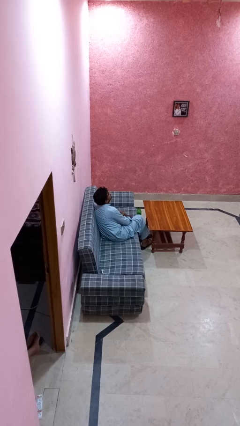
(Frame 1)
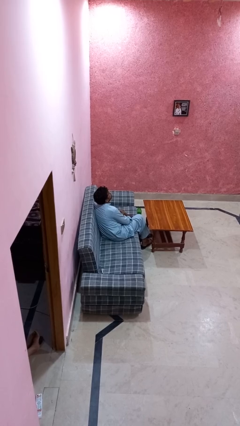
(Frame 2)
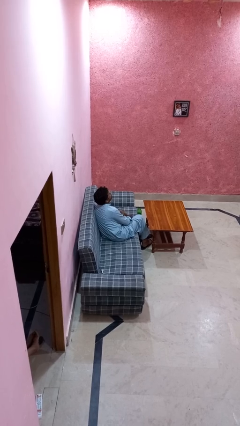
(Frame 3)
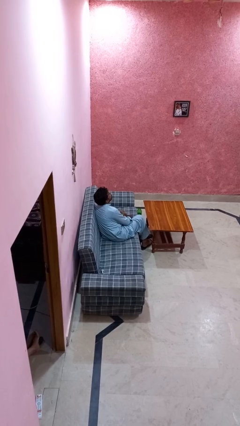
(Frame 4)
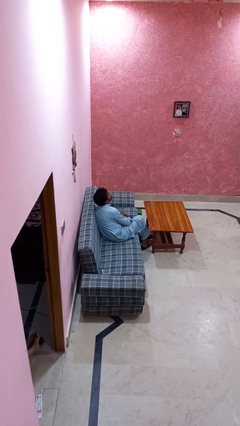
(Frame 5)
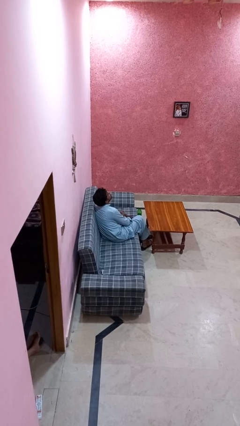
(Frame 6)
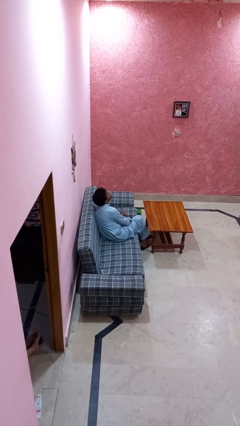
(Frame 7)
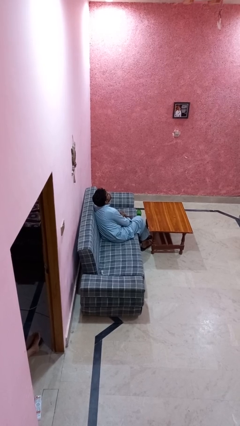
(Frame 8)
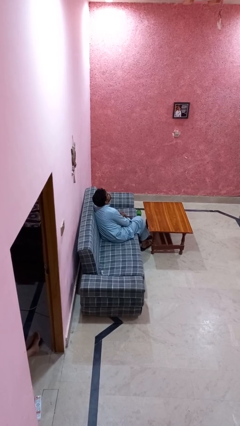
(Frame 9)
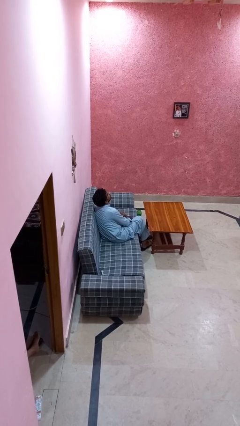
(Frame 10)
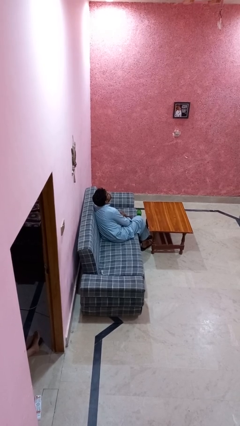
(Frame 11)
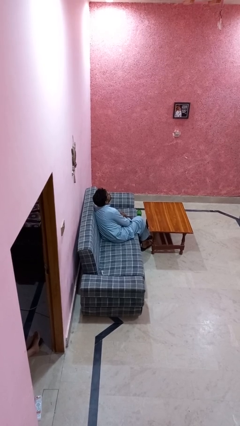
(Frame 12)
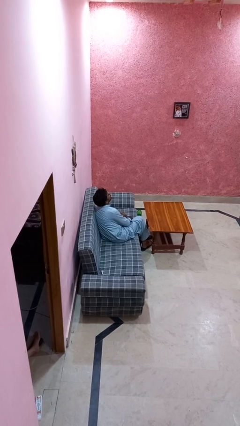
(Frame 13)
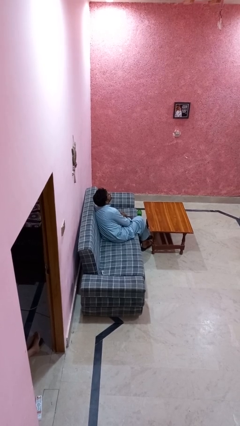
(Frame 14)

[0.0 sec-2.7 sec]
person sticks out tongue

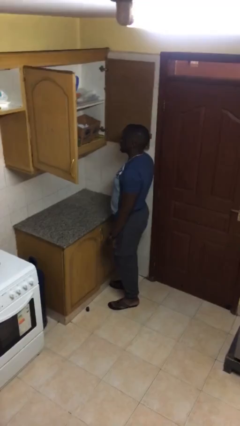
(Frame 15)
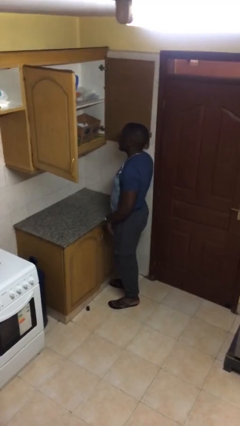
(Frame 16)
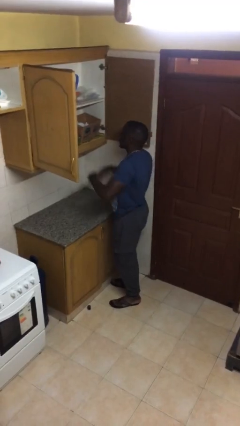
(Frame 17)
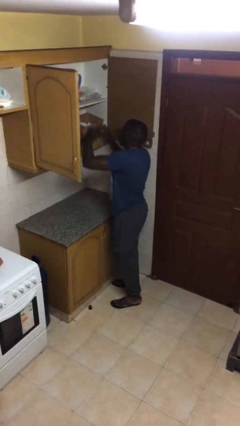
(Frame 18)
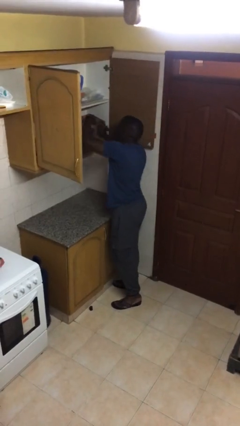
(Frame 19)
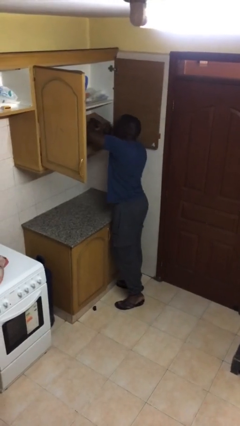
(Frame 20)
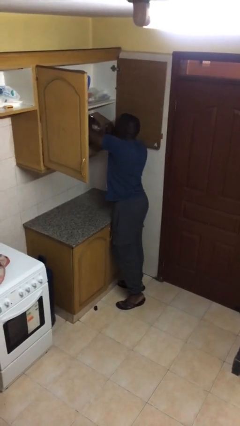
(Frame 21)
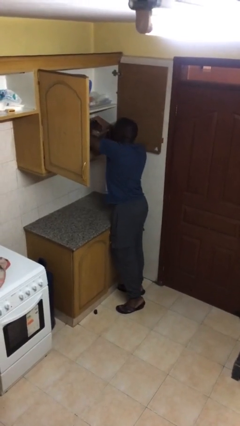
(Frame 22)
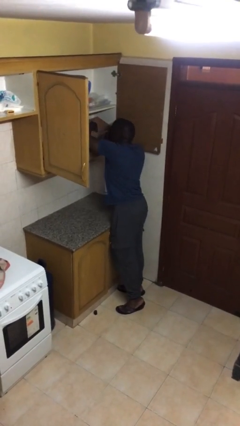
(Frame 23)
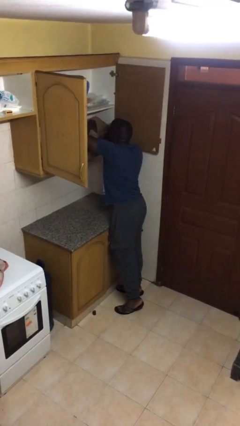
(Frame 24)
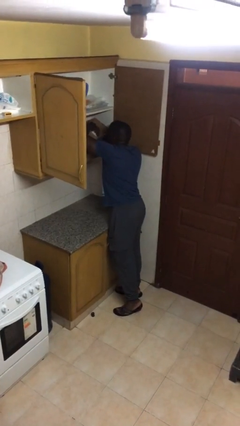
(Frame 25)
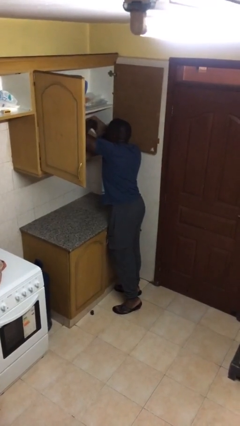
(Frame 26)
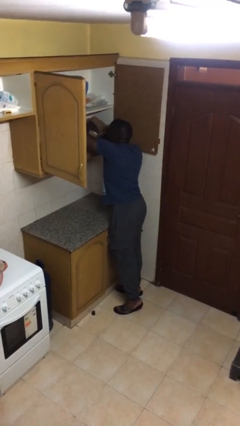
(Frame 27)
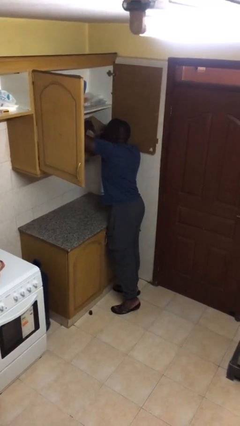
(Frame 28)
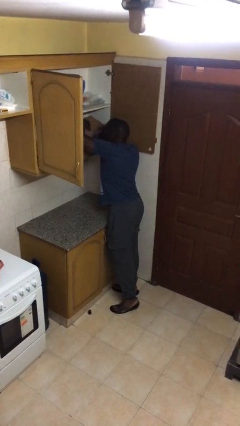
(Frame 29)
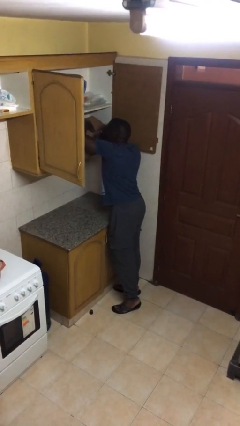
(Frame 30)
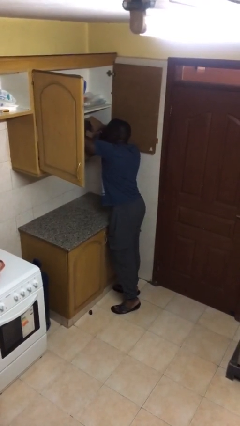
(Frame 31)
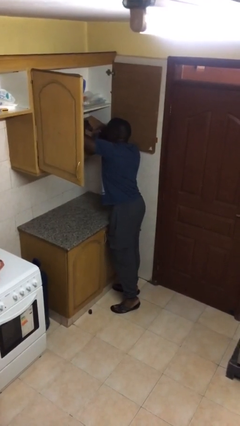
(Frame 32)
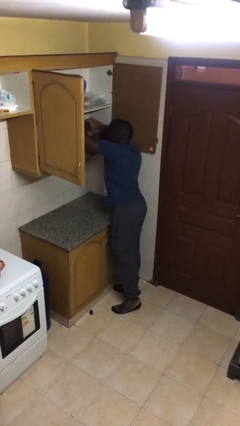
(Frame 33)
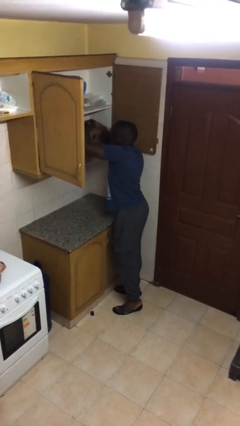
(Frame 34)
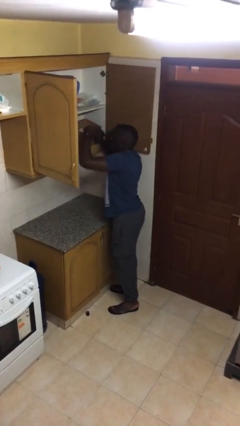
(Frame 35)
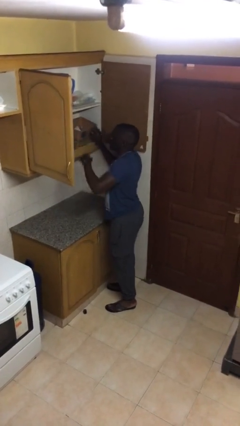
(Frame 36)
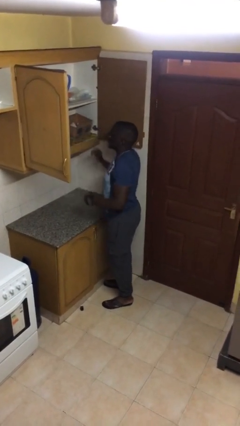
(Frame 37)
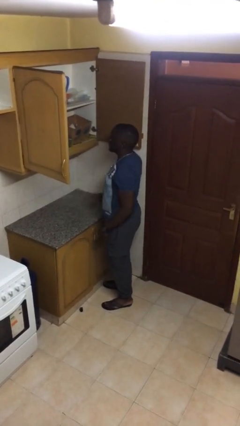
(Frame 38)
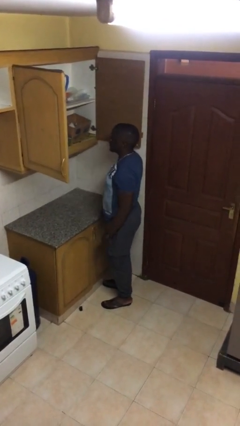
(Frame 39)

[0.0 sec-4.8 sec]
person searches in cabinet

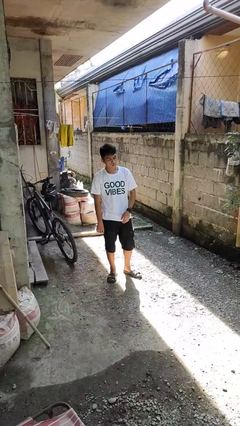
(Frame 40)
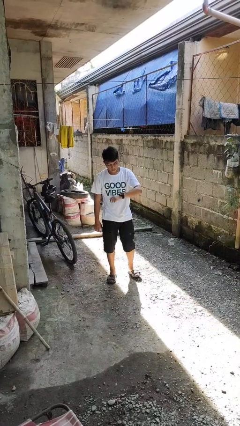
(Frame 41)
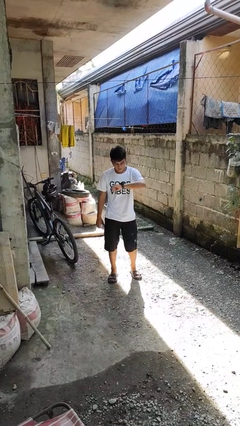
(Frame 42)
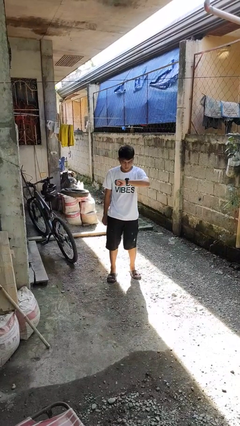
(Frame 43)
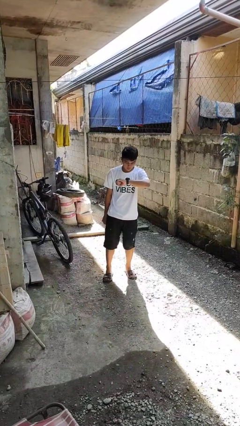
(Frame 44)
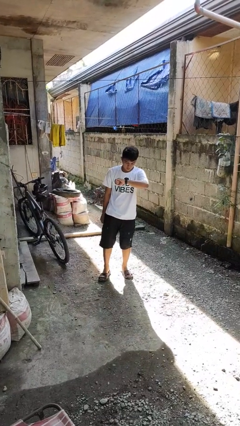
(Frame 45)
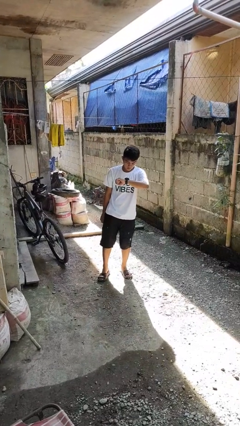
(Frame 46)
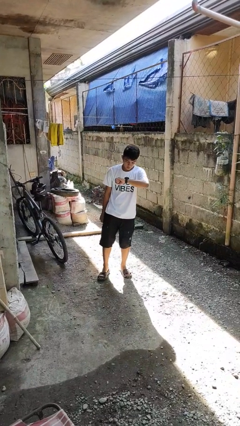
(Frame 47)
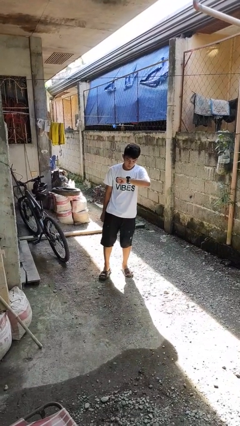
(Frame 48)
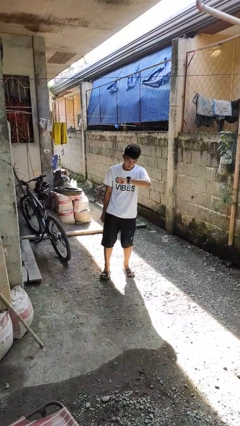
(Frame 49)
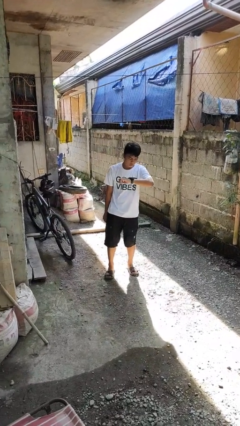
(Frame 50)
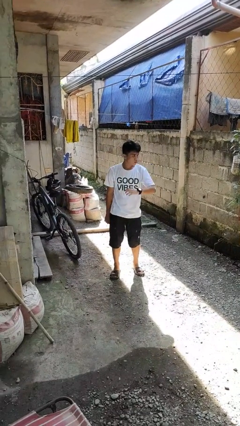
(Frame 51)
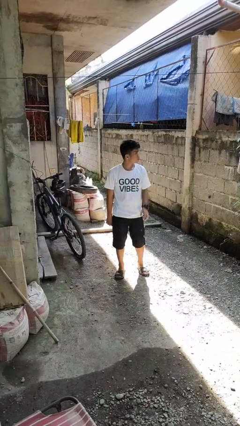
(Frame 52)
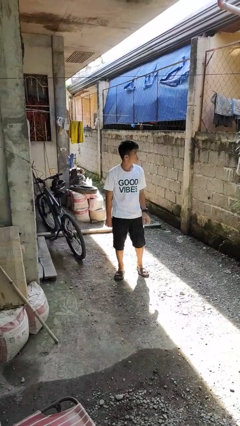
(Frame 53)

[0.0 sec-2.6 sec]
person looks at wristwatch

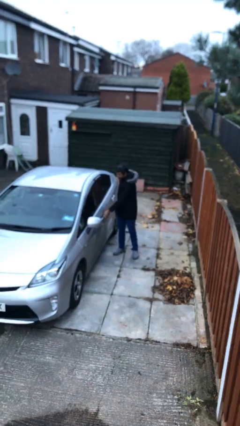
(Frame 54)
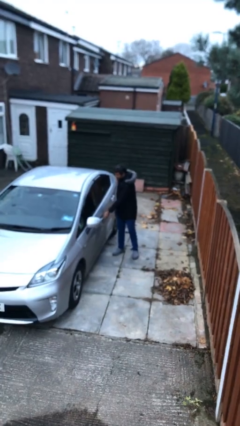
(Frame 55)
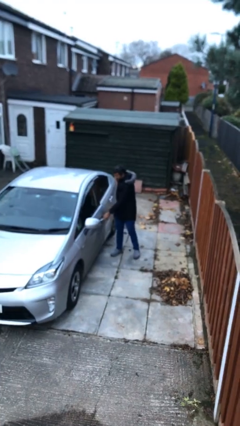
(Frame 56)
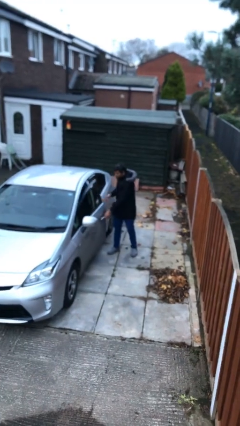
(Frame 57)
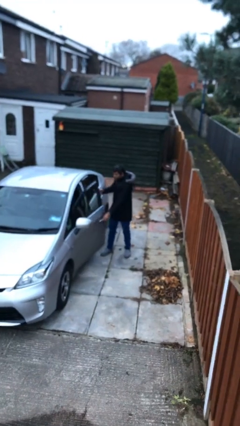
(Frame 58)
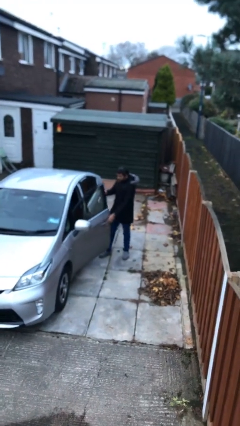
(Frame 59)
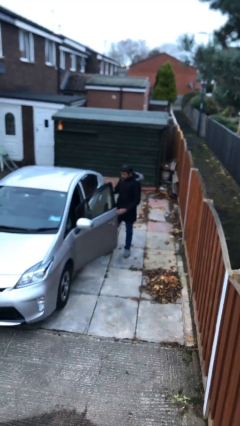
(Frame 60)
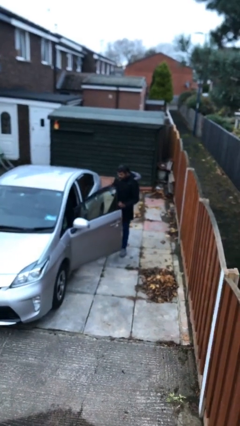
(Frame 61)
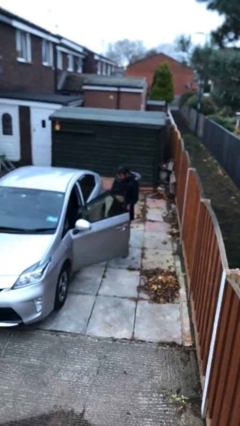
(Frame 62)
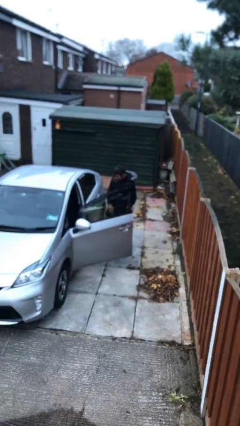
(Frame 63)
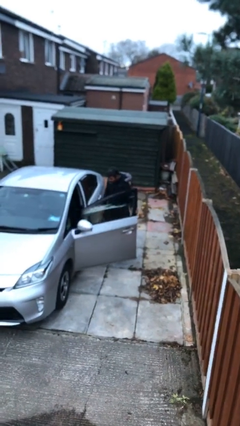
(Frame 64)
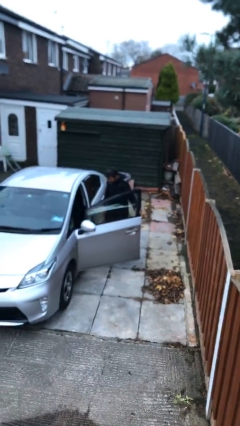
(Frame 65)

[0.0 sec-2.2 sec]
person opens car door

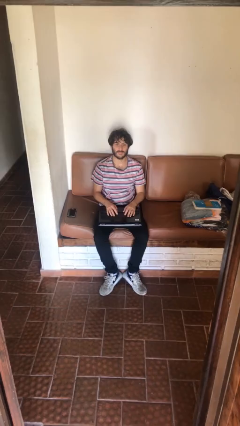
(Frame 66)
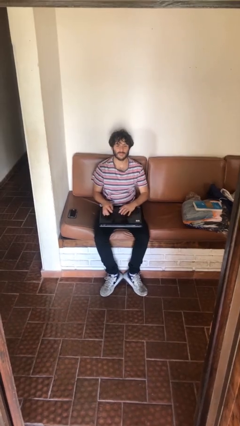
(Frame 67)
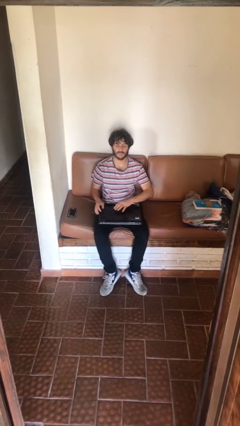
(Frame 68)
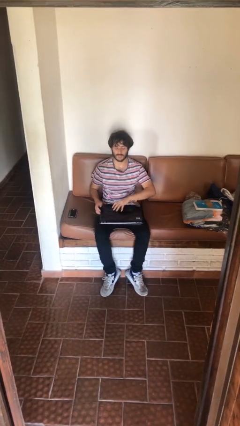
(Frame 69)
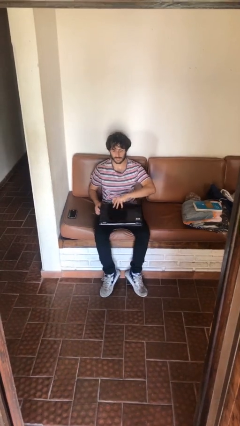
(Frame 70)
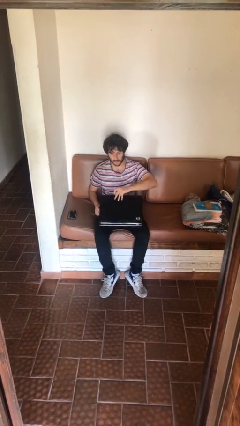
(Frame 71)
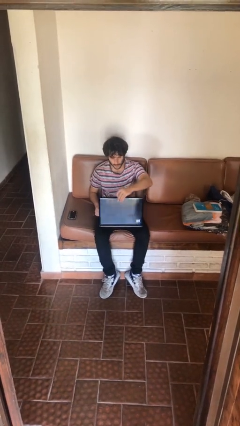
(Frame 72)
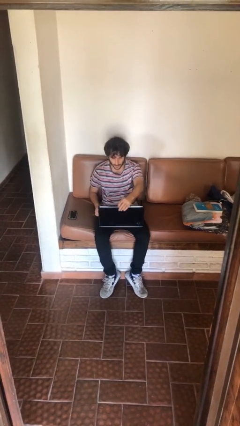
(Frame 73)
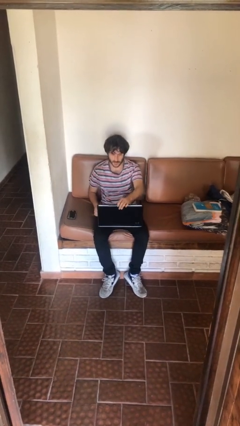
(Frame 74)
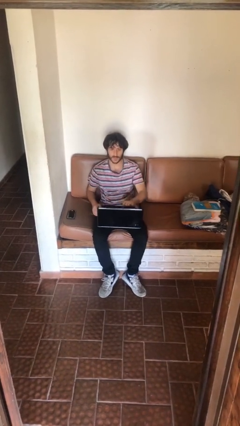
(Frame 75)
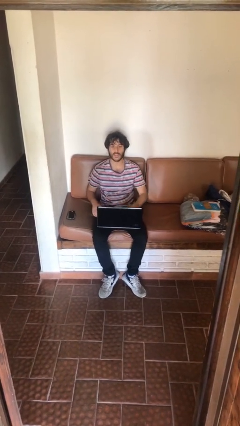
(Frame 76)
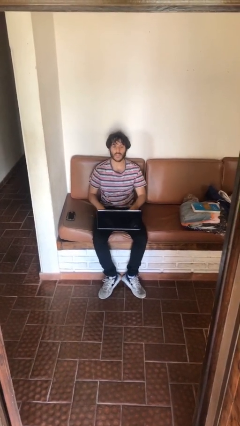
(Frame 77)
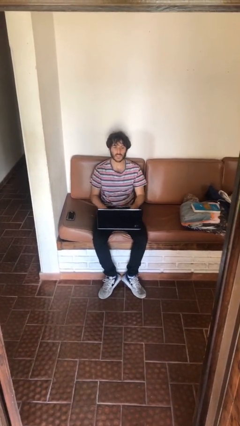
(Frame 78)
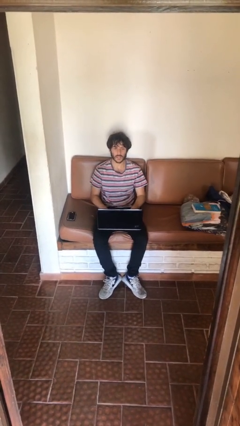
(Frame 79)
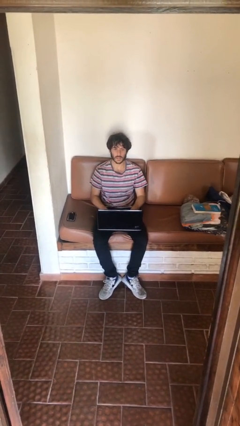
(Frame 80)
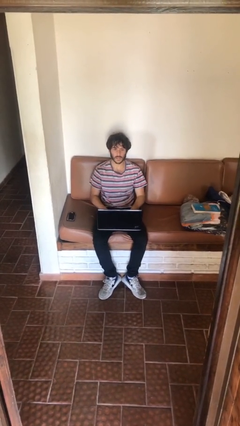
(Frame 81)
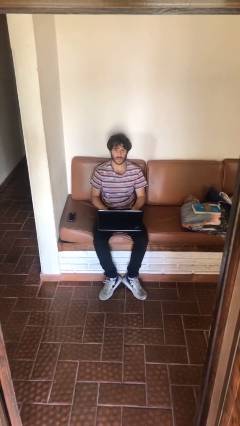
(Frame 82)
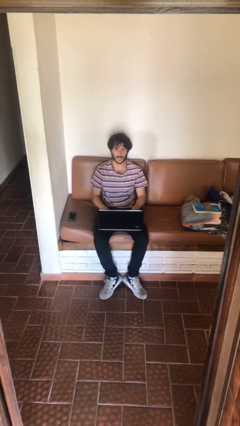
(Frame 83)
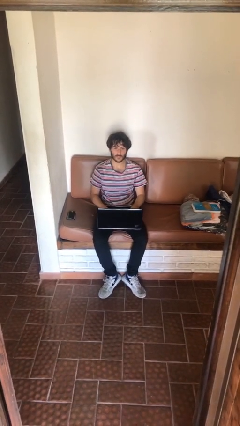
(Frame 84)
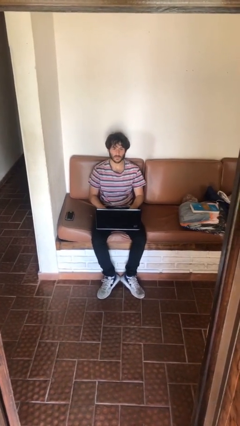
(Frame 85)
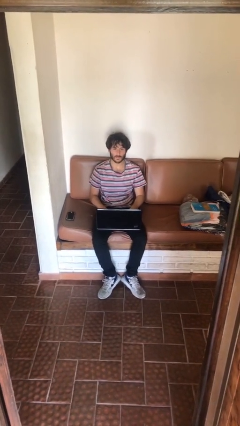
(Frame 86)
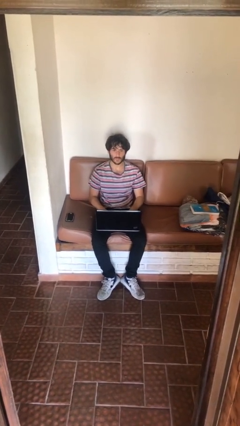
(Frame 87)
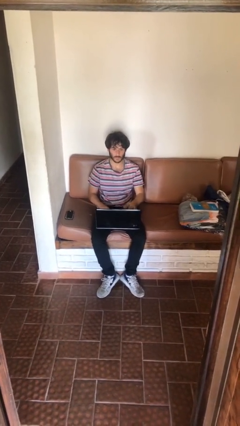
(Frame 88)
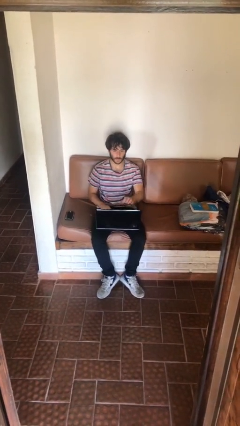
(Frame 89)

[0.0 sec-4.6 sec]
person interacts with laptop

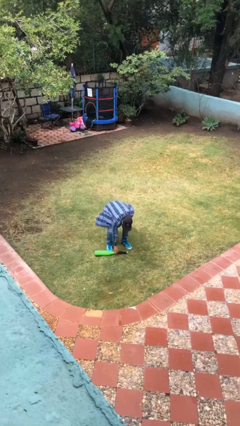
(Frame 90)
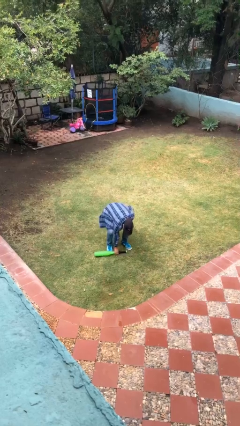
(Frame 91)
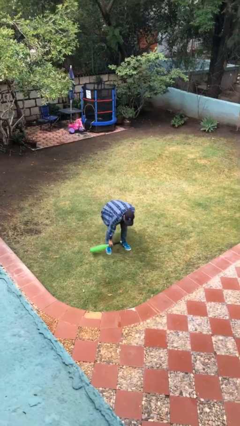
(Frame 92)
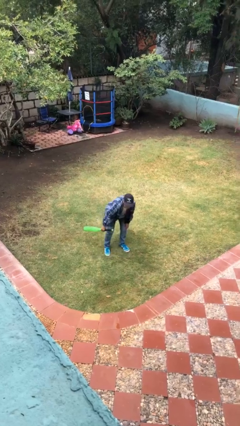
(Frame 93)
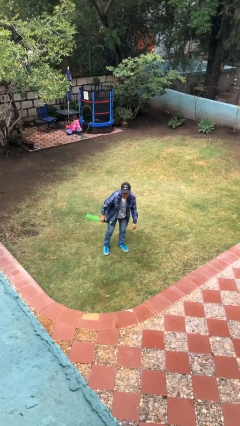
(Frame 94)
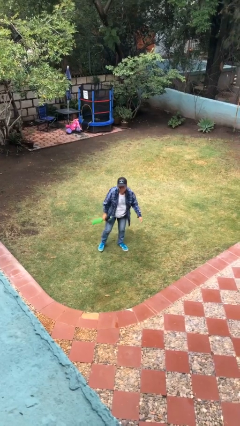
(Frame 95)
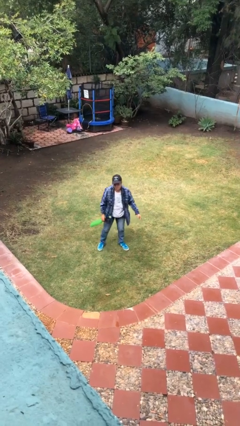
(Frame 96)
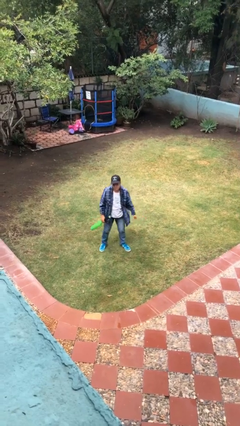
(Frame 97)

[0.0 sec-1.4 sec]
person picks up object from floor
